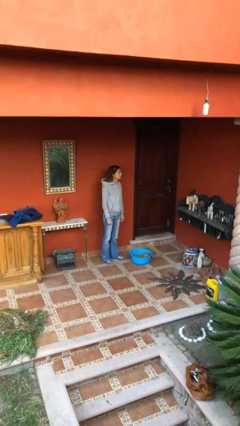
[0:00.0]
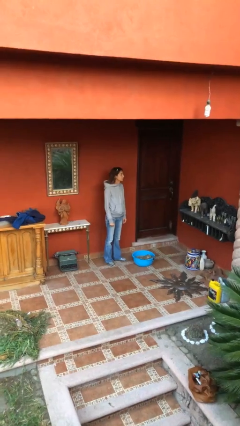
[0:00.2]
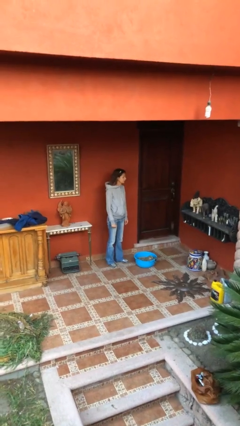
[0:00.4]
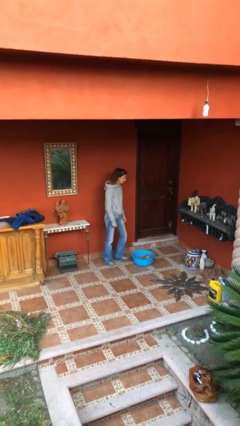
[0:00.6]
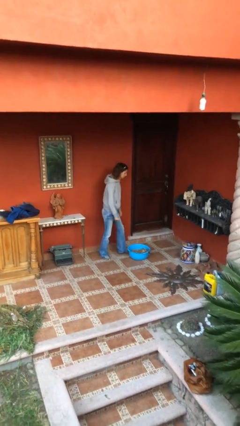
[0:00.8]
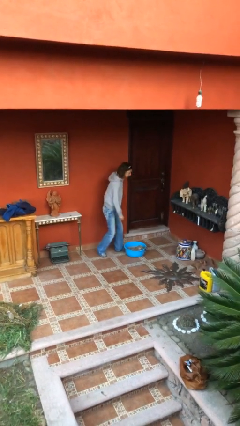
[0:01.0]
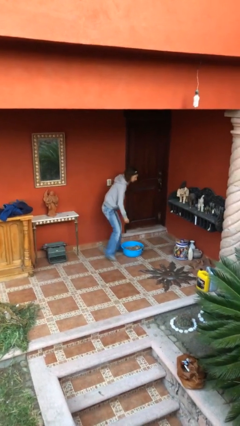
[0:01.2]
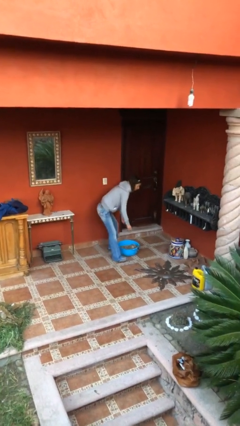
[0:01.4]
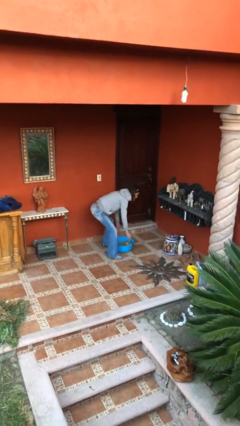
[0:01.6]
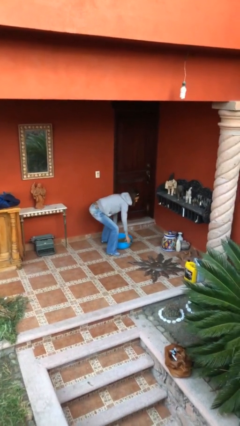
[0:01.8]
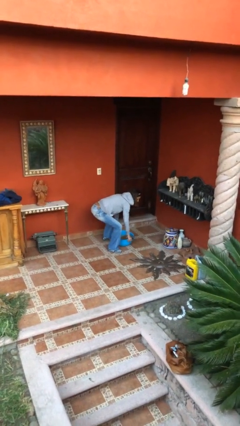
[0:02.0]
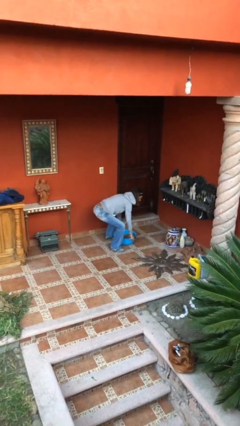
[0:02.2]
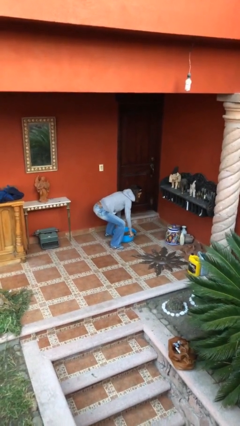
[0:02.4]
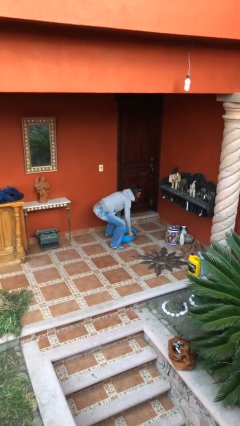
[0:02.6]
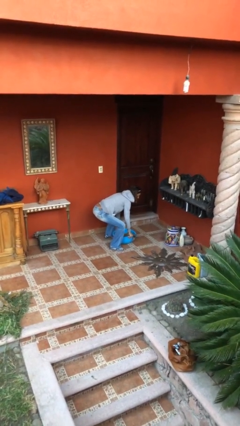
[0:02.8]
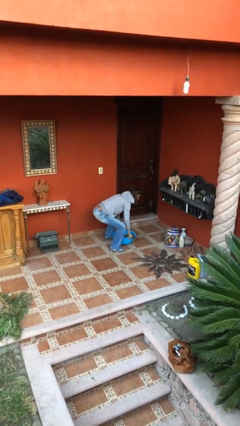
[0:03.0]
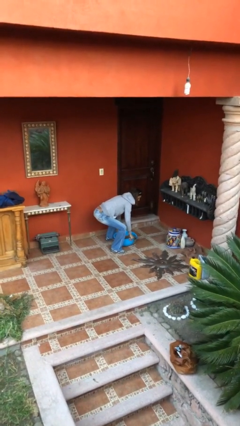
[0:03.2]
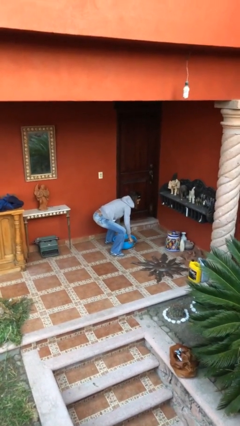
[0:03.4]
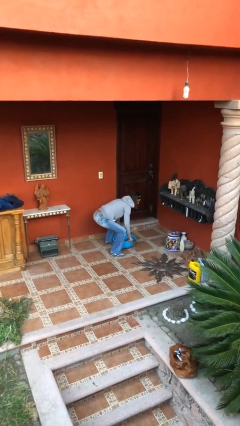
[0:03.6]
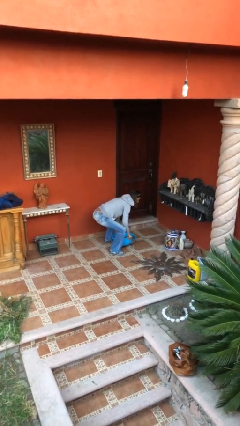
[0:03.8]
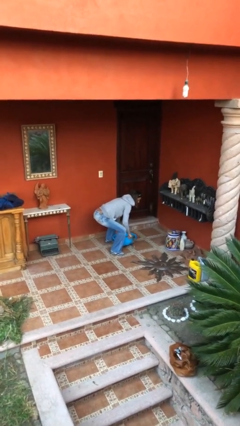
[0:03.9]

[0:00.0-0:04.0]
person picks up object from floor

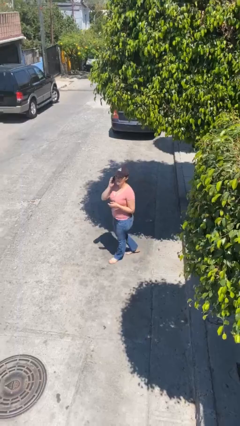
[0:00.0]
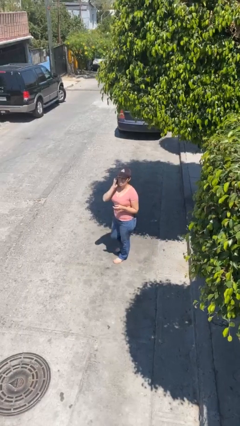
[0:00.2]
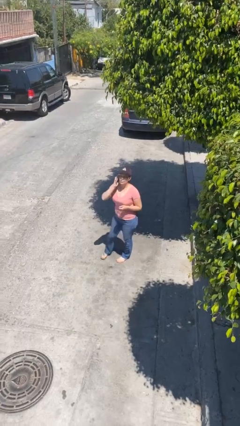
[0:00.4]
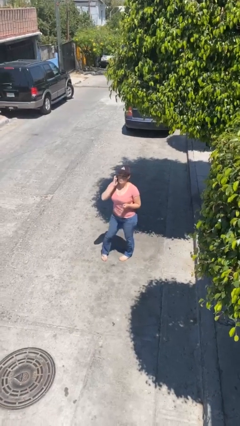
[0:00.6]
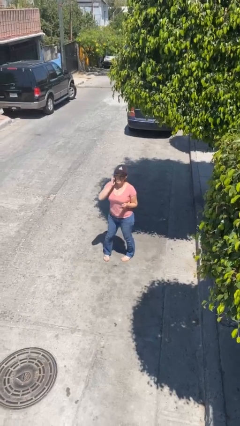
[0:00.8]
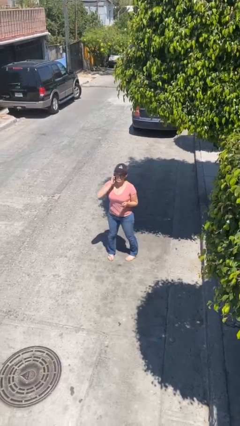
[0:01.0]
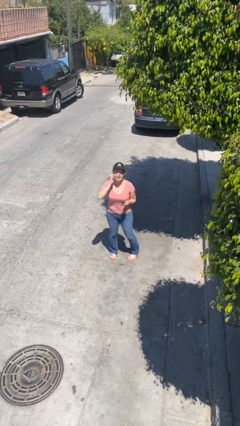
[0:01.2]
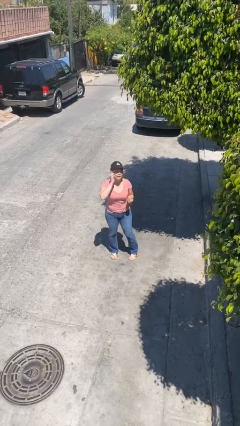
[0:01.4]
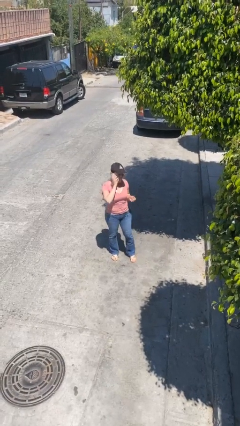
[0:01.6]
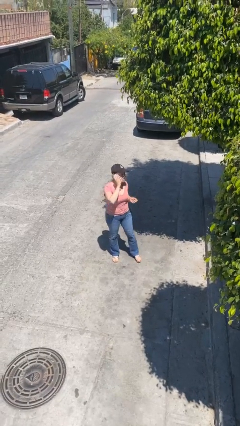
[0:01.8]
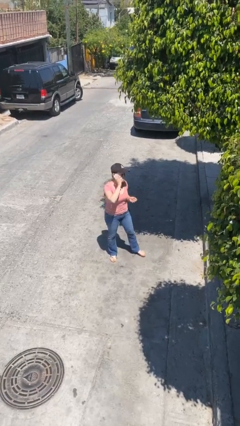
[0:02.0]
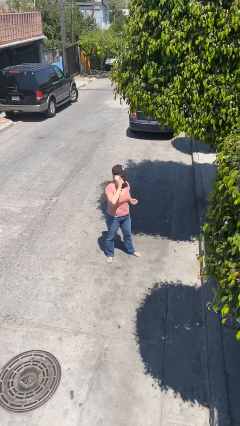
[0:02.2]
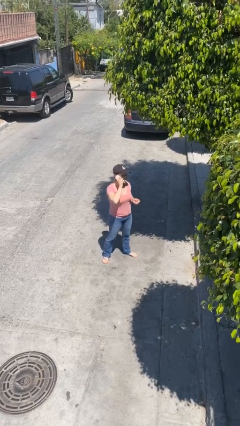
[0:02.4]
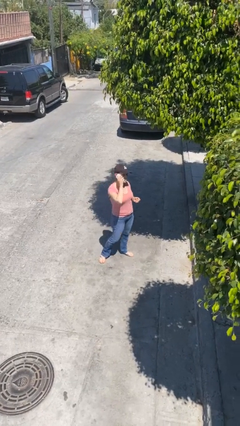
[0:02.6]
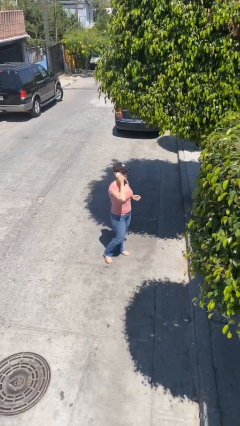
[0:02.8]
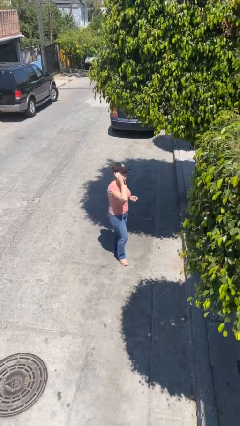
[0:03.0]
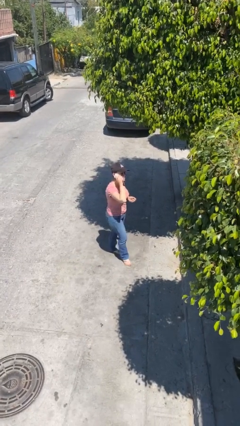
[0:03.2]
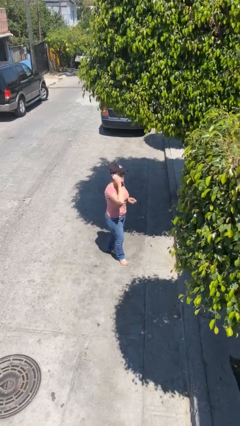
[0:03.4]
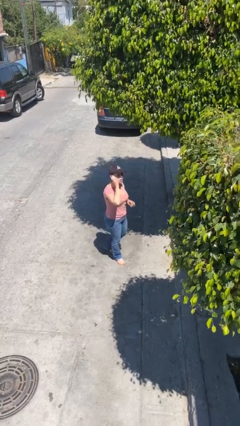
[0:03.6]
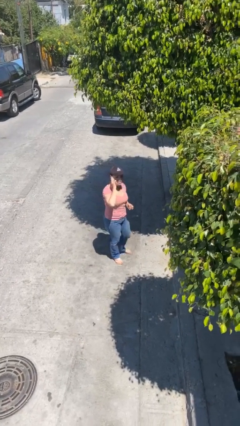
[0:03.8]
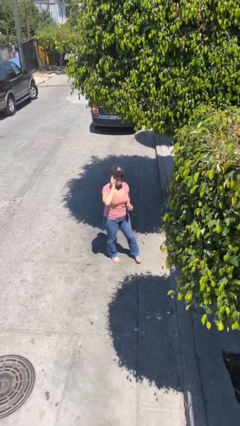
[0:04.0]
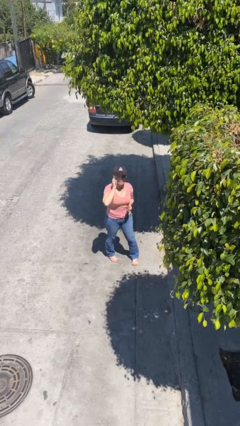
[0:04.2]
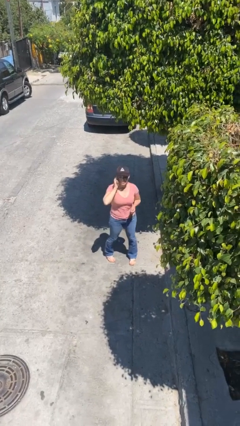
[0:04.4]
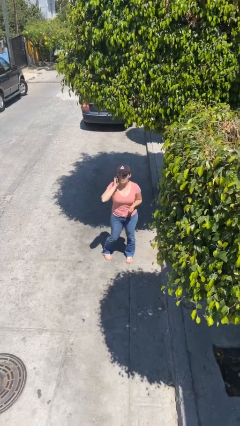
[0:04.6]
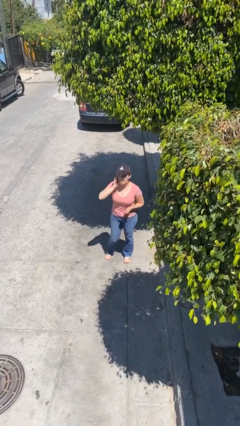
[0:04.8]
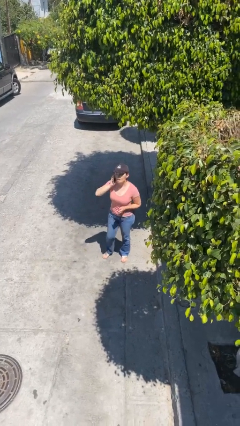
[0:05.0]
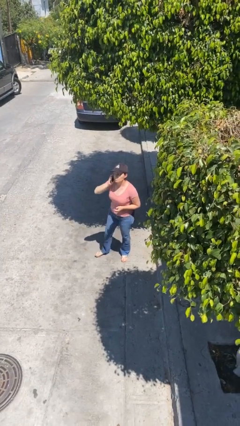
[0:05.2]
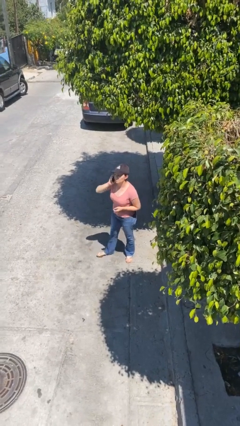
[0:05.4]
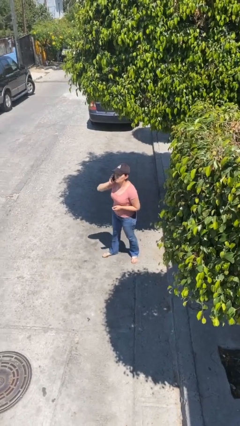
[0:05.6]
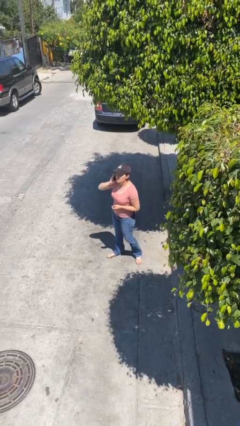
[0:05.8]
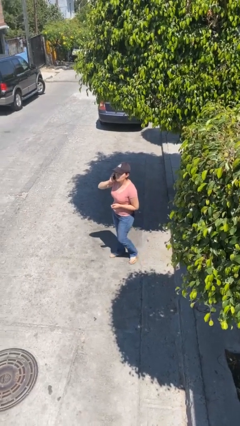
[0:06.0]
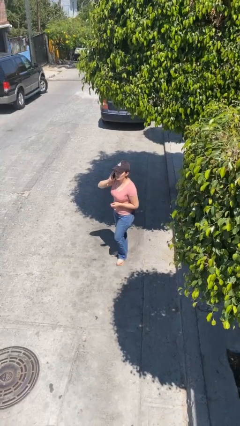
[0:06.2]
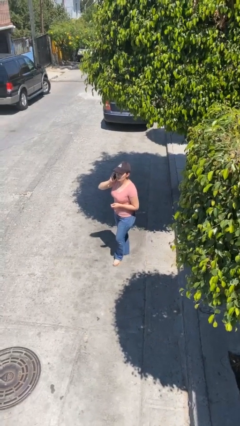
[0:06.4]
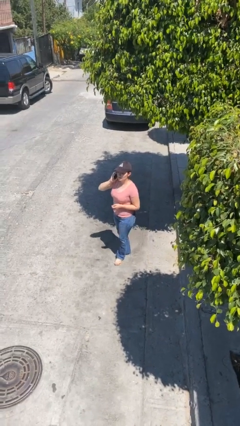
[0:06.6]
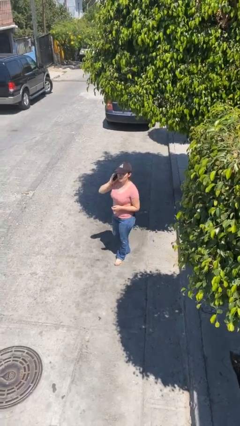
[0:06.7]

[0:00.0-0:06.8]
person talks on phone

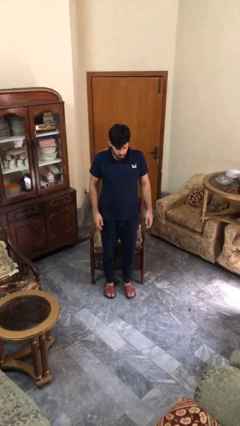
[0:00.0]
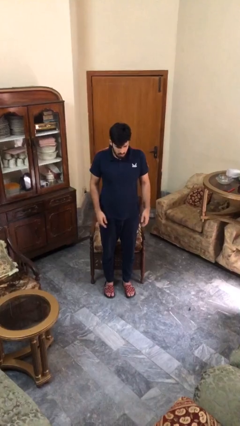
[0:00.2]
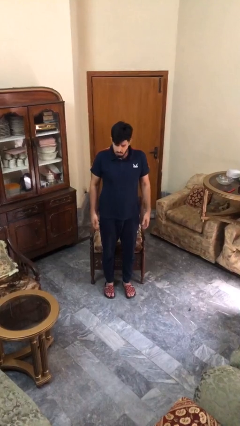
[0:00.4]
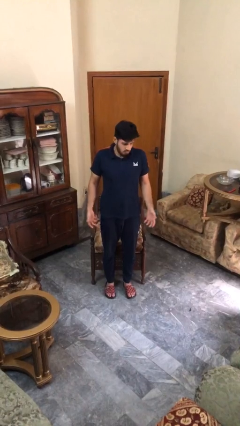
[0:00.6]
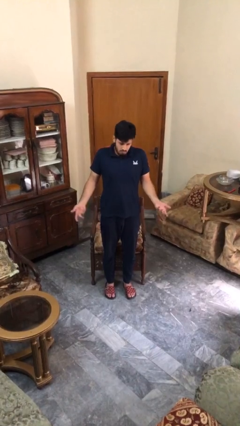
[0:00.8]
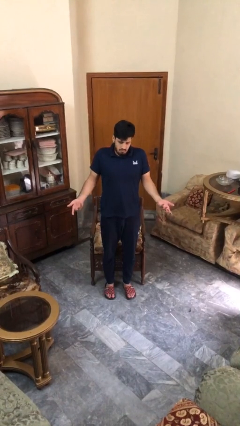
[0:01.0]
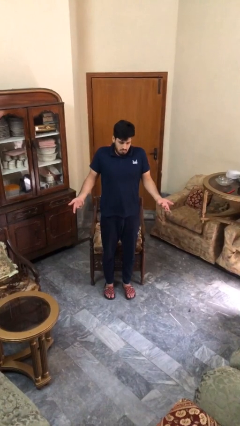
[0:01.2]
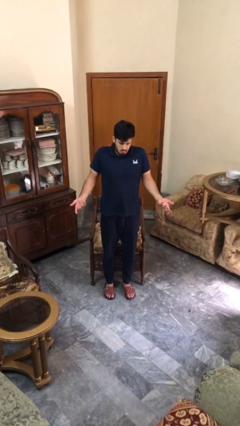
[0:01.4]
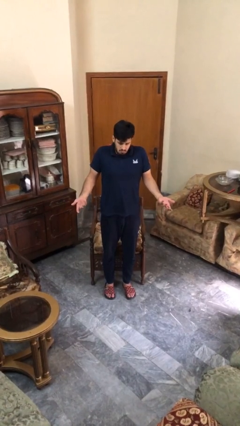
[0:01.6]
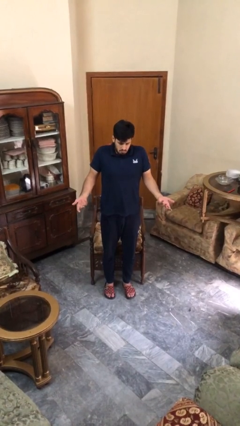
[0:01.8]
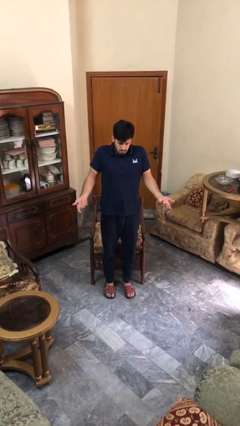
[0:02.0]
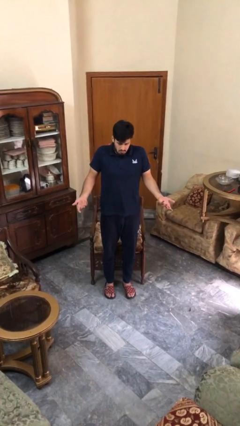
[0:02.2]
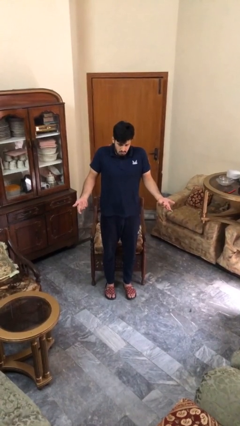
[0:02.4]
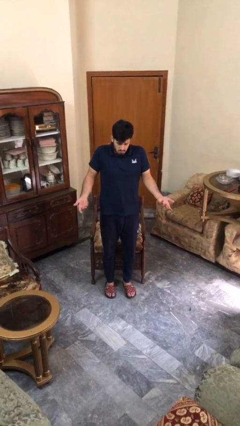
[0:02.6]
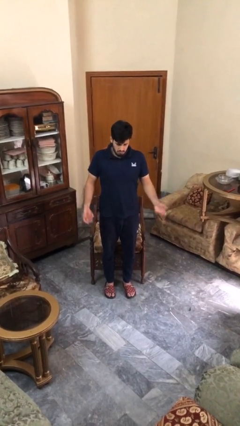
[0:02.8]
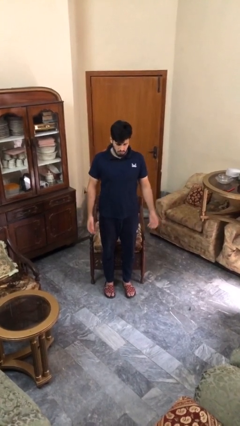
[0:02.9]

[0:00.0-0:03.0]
person shrugs

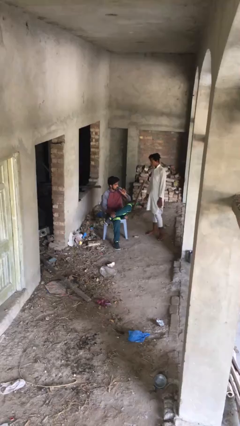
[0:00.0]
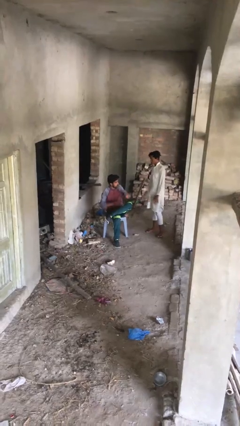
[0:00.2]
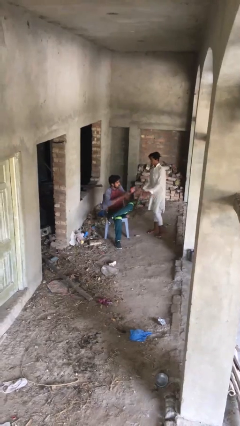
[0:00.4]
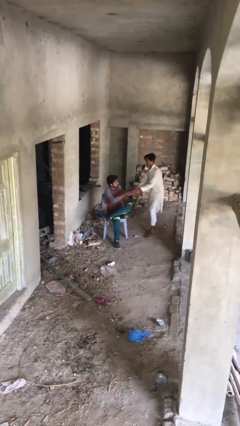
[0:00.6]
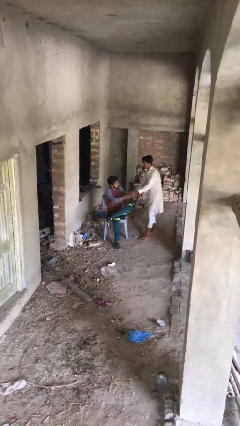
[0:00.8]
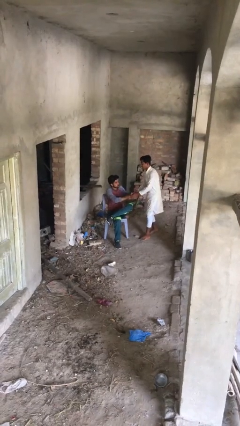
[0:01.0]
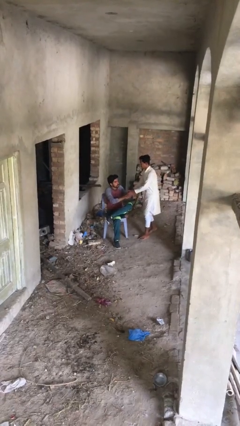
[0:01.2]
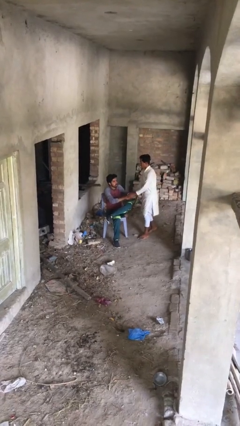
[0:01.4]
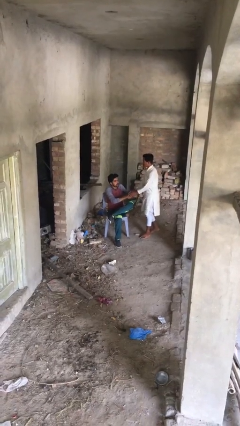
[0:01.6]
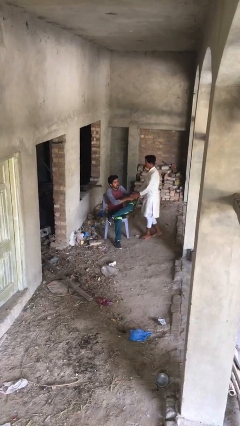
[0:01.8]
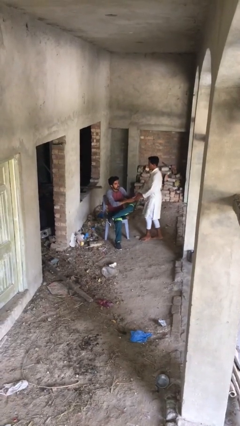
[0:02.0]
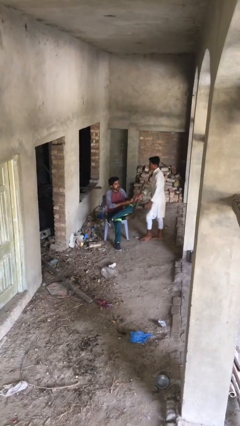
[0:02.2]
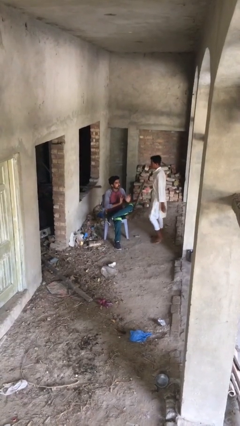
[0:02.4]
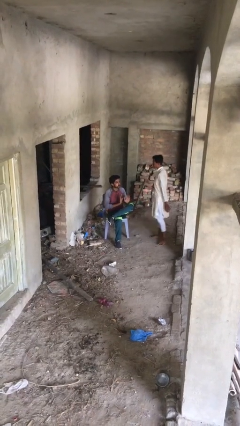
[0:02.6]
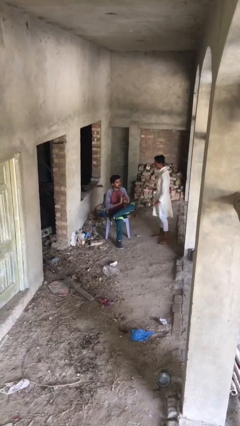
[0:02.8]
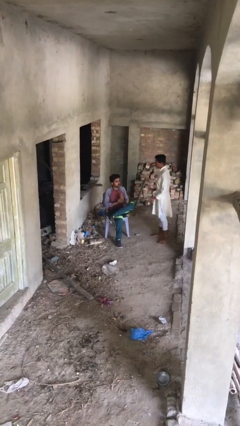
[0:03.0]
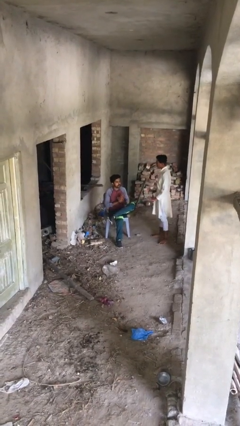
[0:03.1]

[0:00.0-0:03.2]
person shakes hand

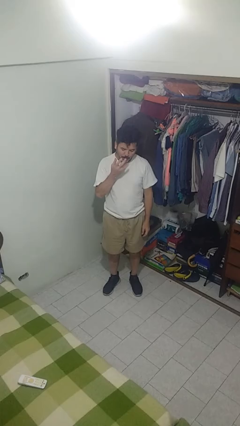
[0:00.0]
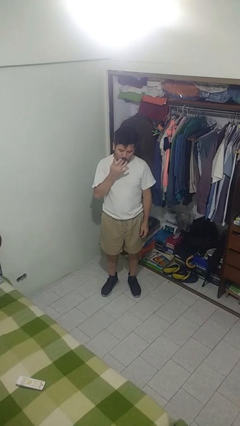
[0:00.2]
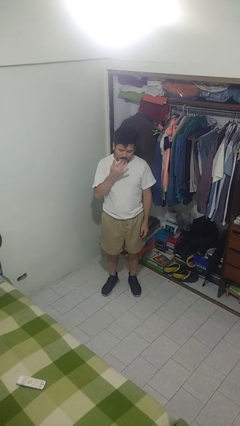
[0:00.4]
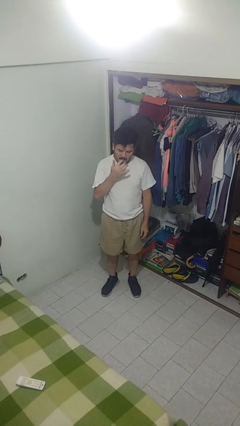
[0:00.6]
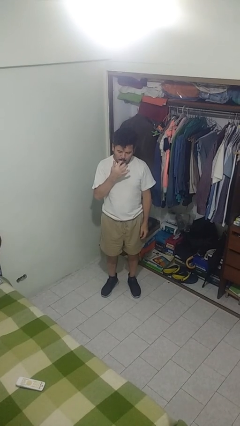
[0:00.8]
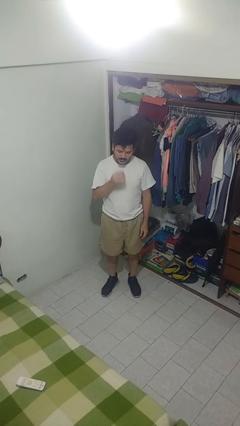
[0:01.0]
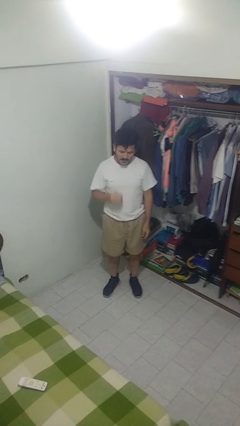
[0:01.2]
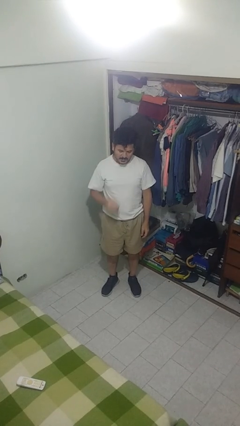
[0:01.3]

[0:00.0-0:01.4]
person licks fingers
